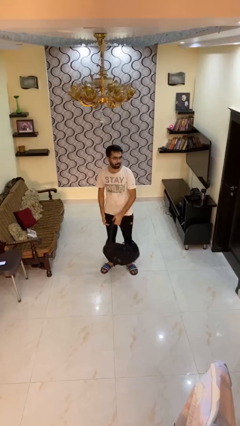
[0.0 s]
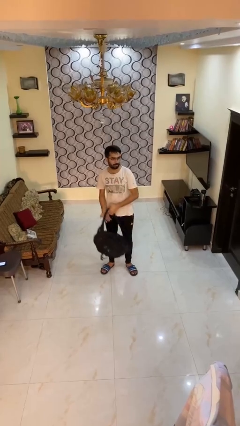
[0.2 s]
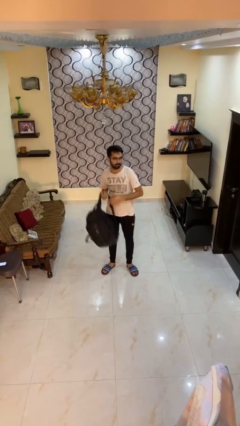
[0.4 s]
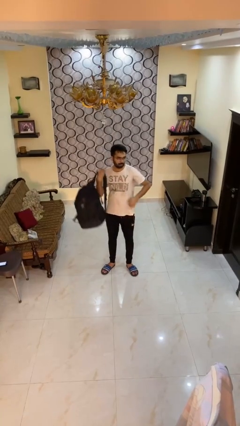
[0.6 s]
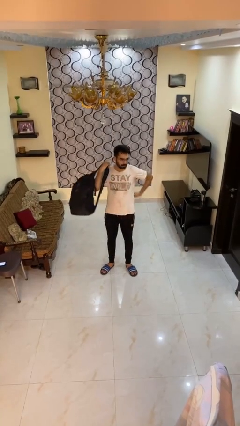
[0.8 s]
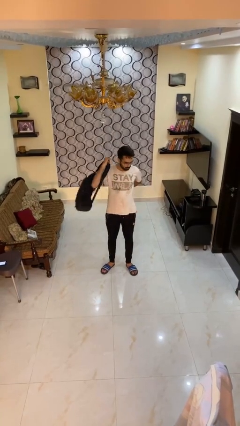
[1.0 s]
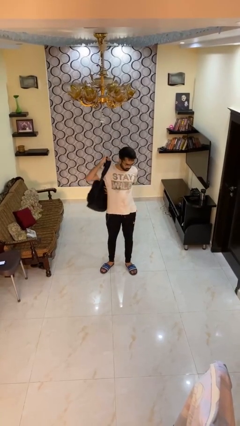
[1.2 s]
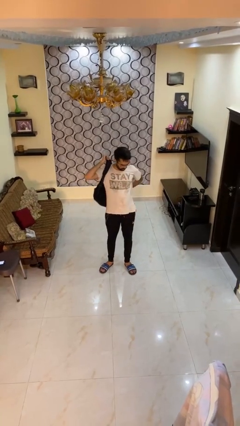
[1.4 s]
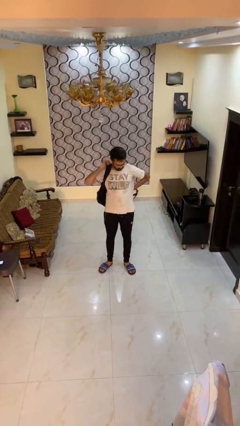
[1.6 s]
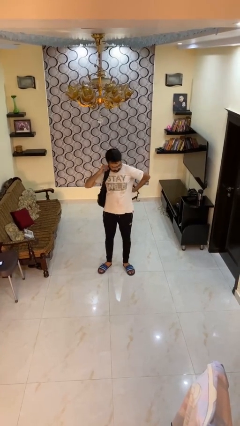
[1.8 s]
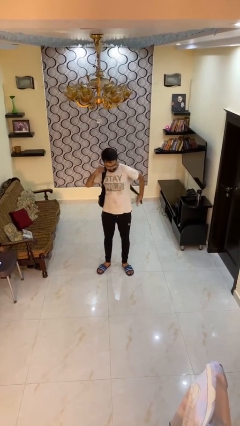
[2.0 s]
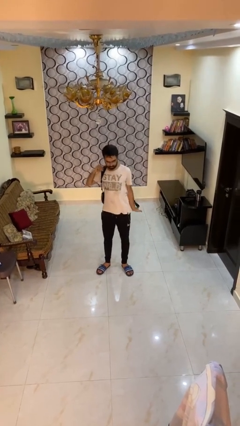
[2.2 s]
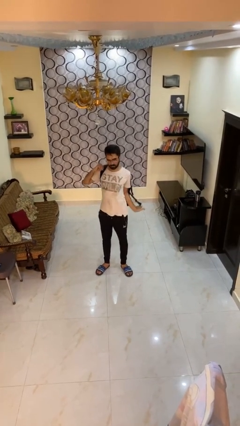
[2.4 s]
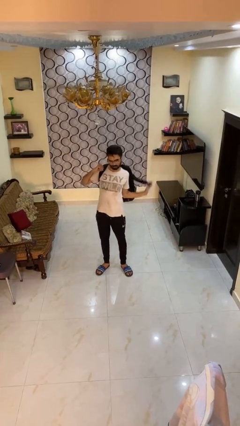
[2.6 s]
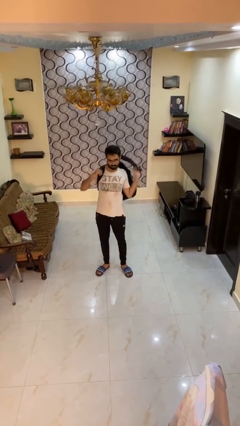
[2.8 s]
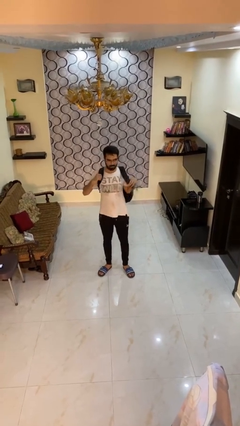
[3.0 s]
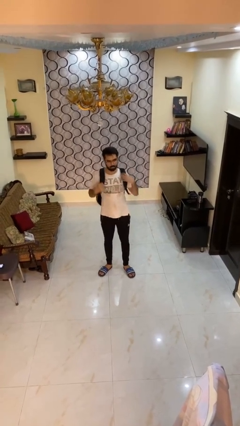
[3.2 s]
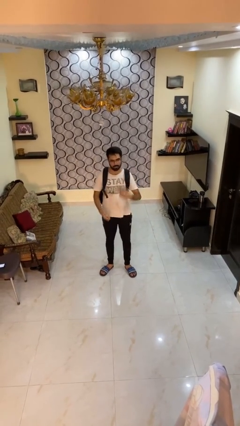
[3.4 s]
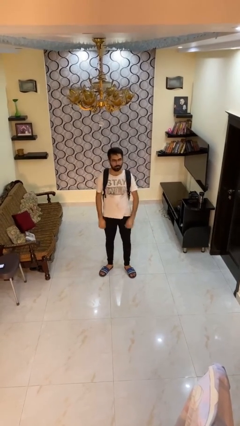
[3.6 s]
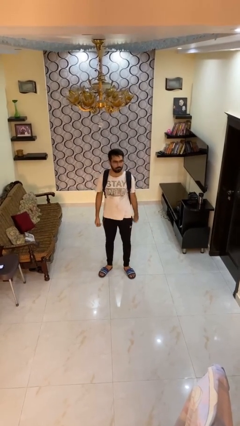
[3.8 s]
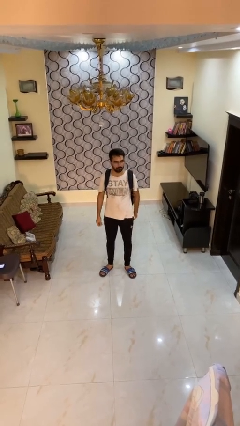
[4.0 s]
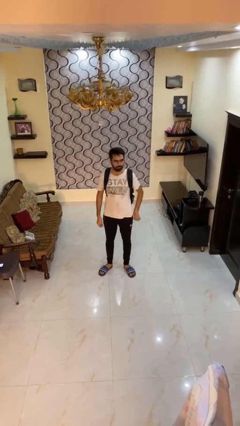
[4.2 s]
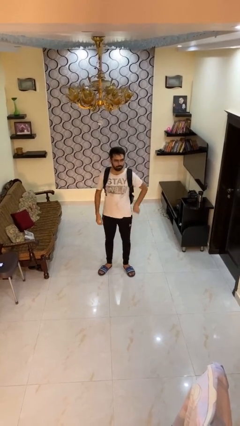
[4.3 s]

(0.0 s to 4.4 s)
person puts on backpack

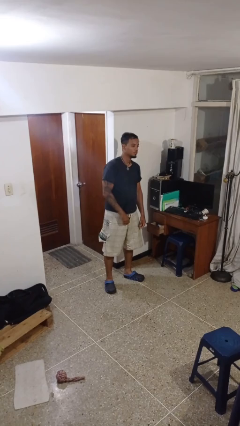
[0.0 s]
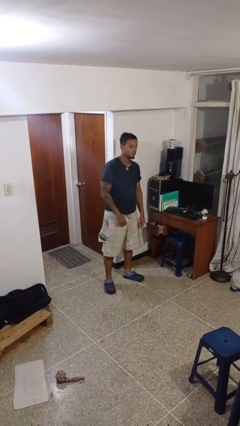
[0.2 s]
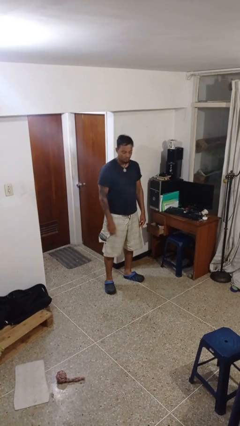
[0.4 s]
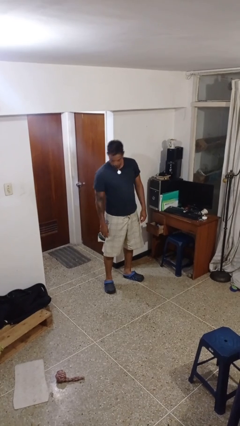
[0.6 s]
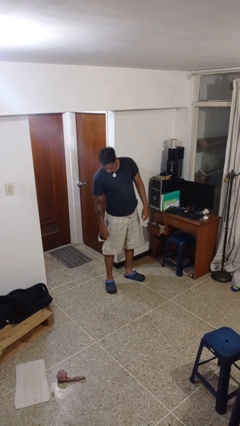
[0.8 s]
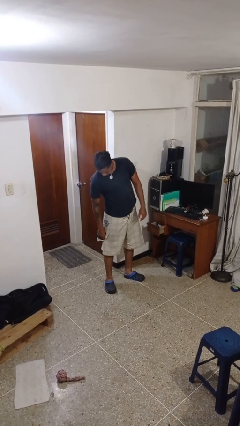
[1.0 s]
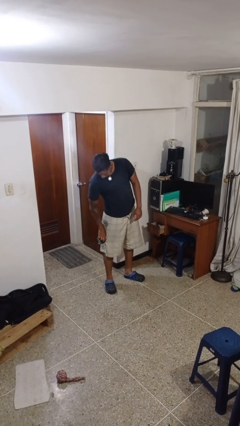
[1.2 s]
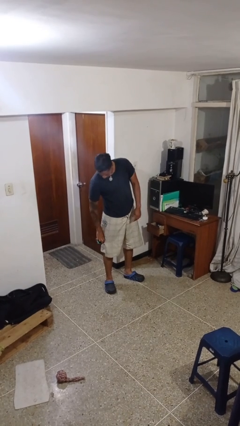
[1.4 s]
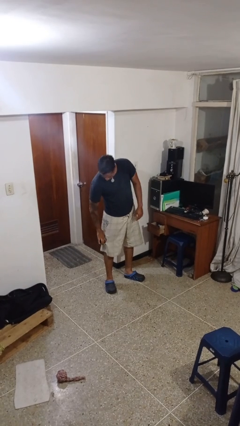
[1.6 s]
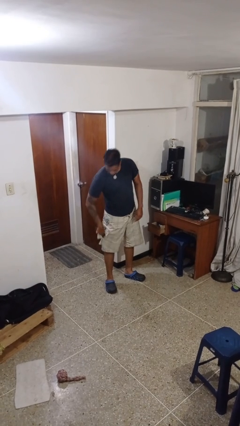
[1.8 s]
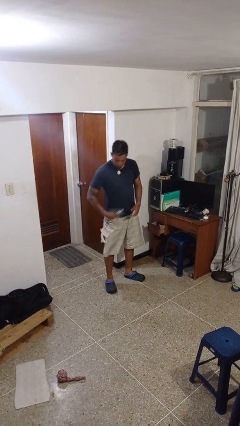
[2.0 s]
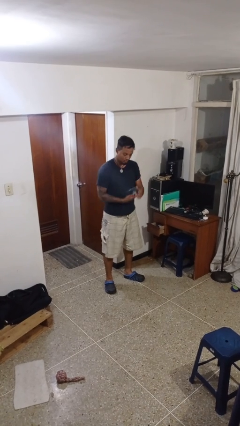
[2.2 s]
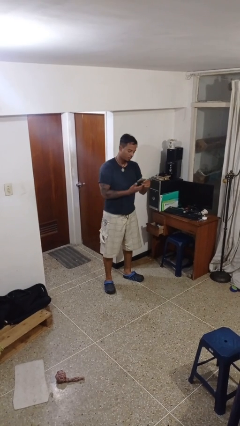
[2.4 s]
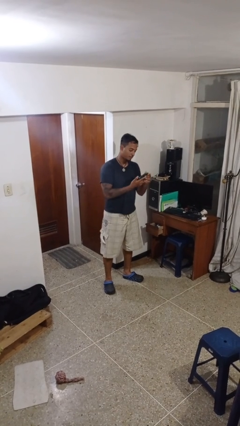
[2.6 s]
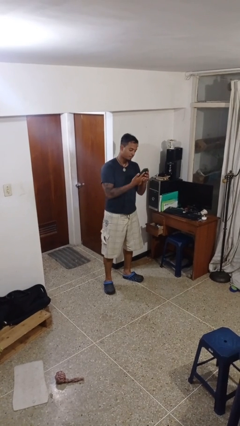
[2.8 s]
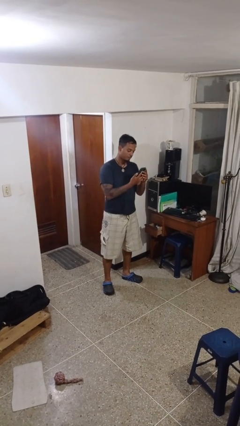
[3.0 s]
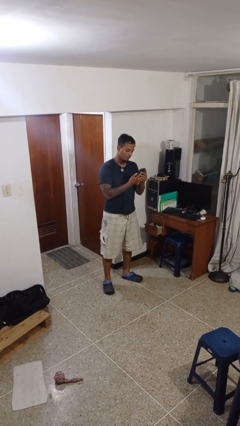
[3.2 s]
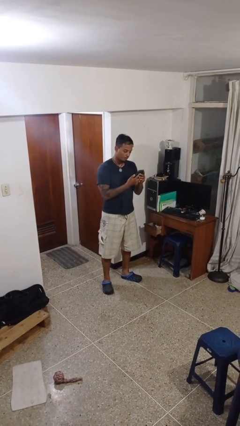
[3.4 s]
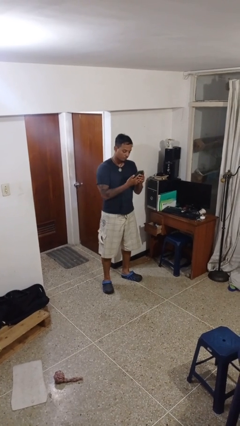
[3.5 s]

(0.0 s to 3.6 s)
person takes phone from pocket

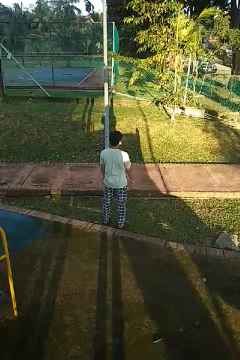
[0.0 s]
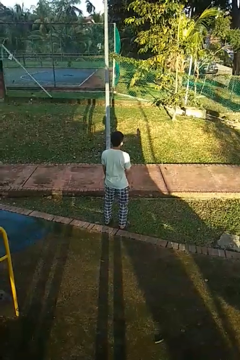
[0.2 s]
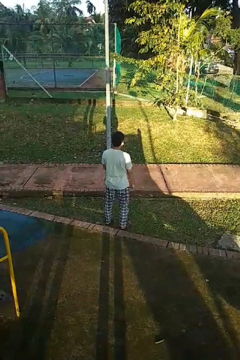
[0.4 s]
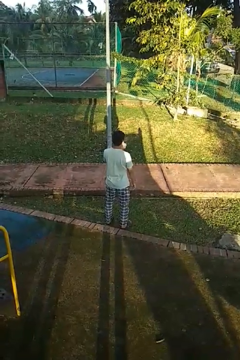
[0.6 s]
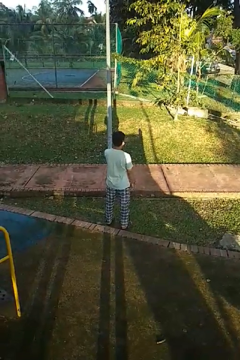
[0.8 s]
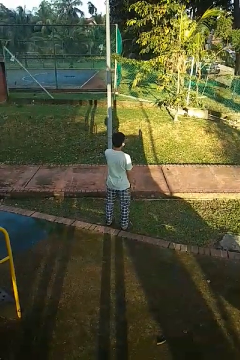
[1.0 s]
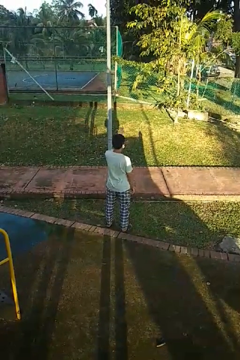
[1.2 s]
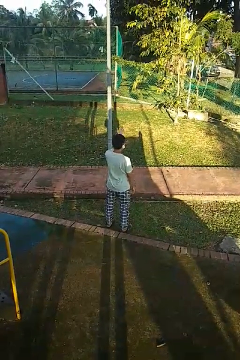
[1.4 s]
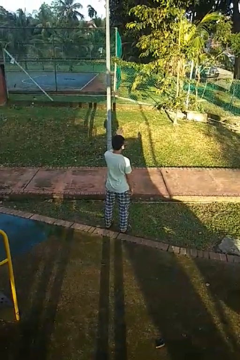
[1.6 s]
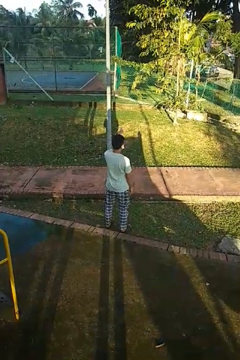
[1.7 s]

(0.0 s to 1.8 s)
person gestures blow kiss

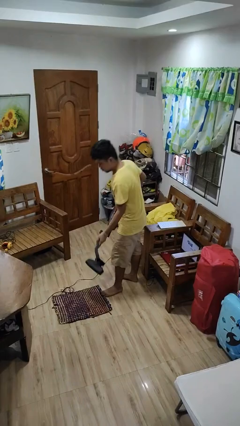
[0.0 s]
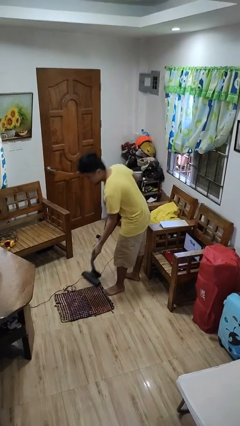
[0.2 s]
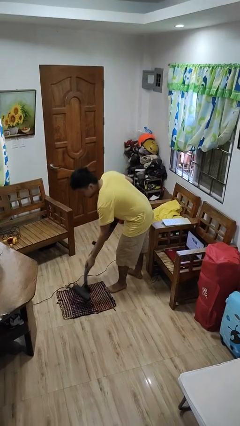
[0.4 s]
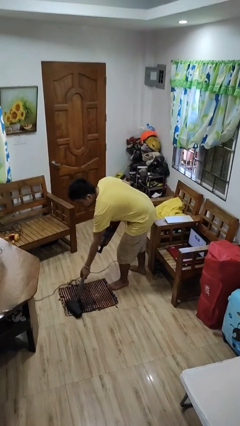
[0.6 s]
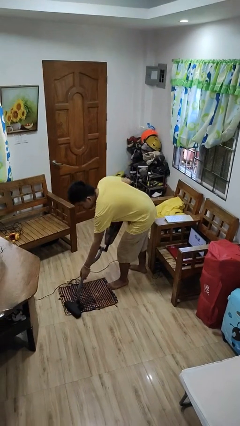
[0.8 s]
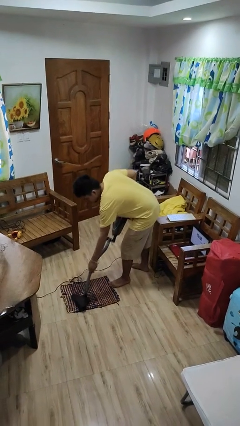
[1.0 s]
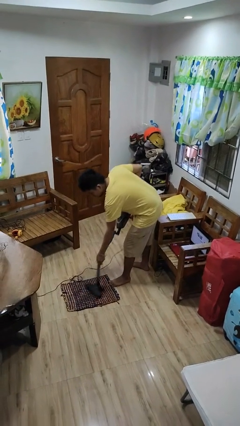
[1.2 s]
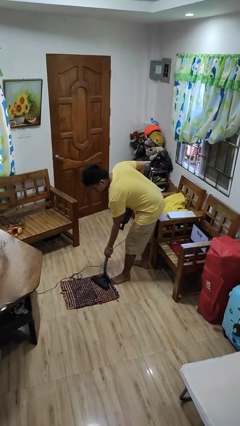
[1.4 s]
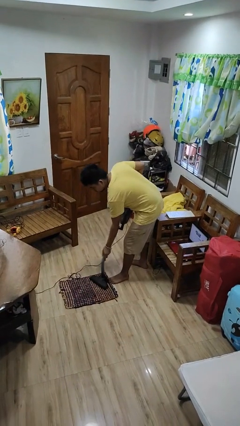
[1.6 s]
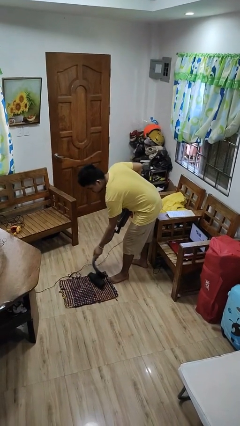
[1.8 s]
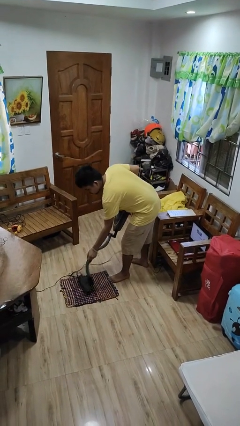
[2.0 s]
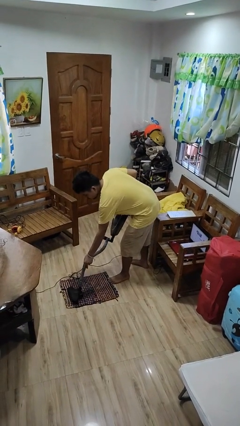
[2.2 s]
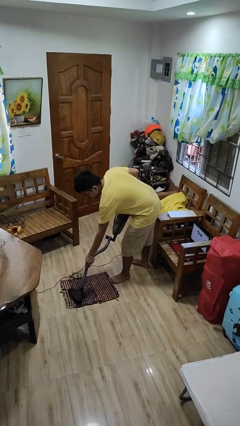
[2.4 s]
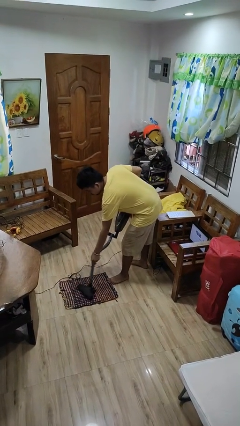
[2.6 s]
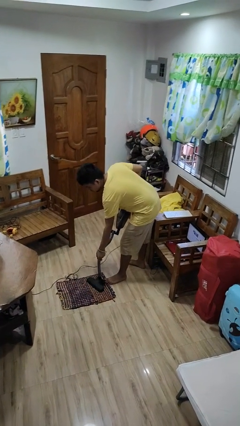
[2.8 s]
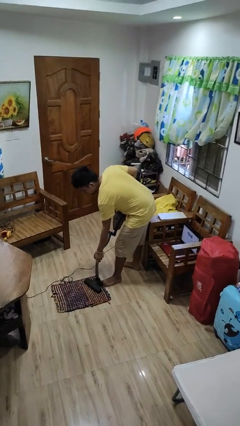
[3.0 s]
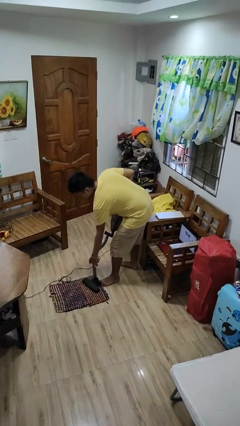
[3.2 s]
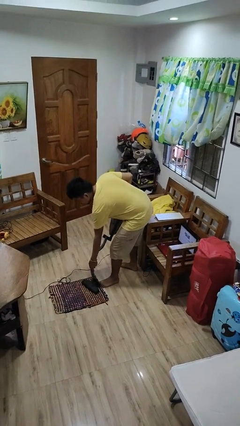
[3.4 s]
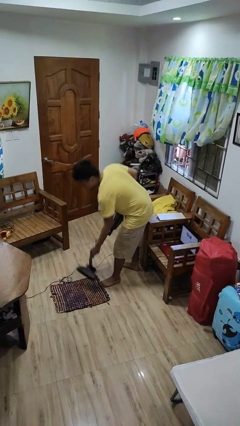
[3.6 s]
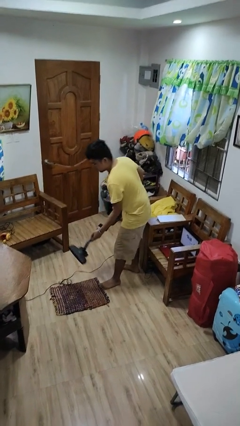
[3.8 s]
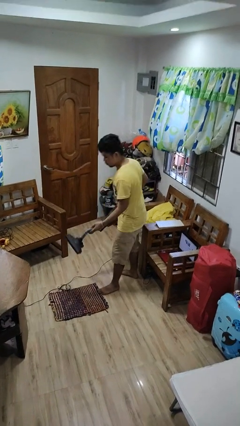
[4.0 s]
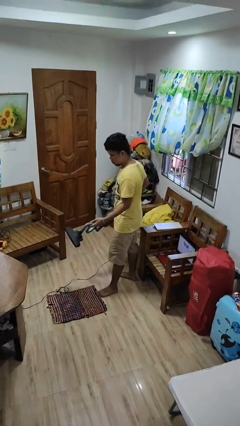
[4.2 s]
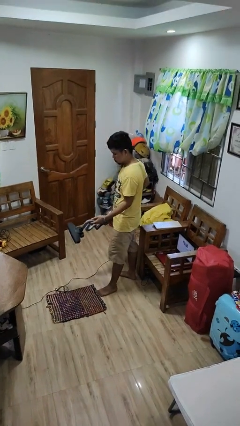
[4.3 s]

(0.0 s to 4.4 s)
person vacuums carpet

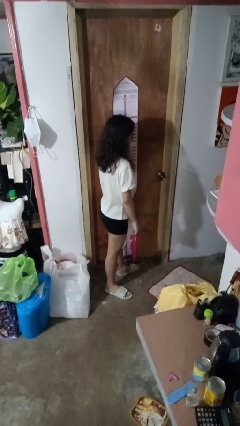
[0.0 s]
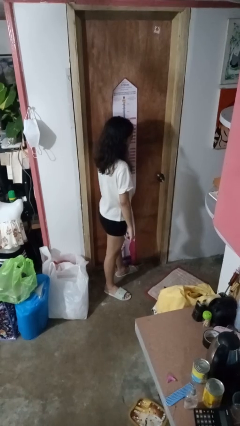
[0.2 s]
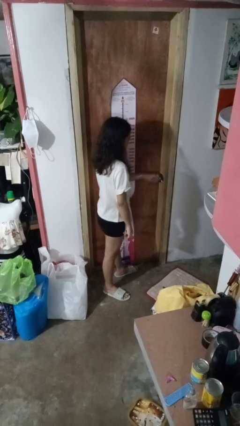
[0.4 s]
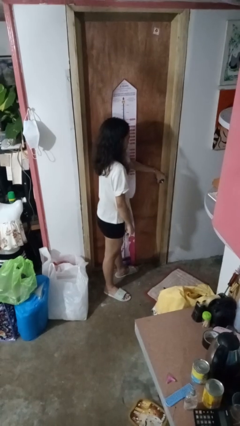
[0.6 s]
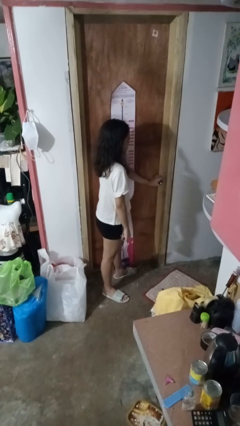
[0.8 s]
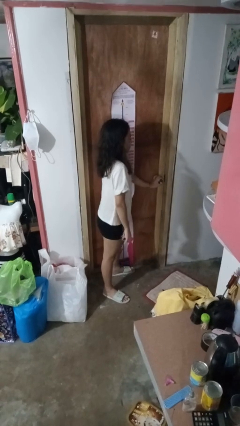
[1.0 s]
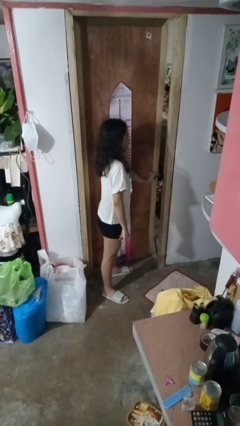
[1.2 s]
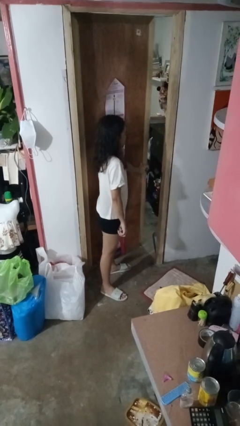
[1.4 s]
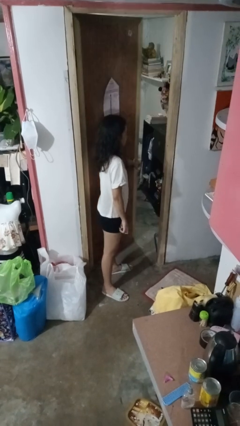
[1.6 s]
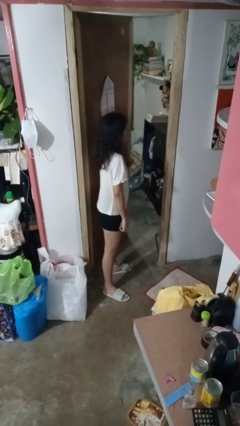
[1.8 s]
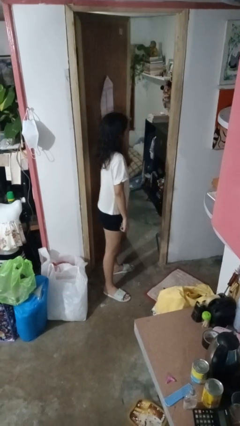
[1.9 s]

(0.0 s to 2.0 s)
person opens facility door

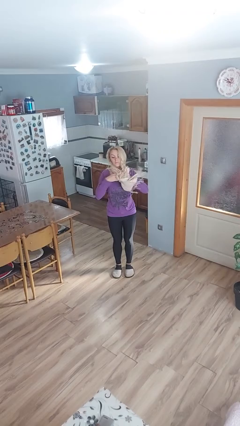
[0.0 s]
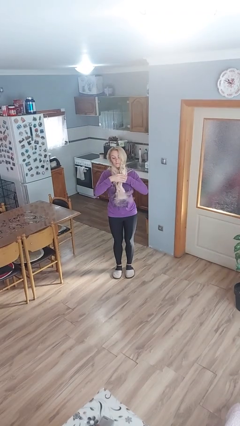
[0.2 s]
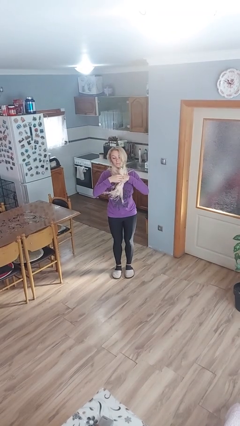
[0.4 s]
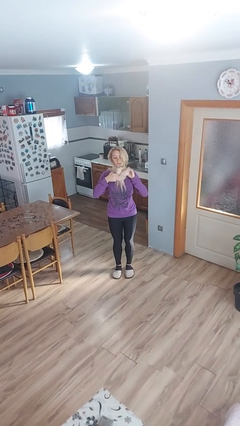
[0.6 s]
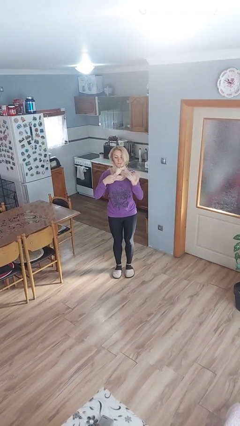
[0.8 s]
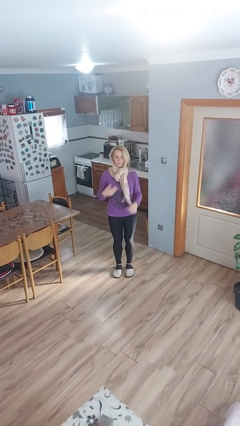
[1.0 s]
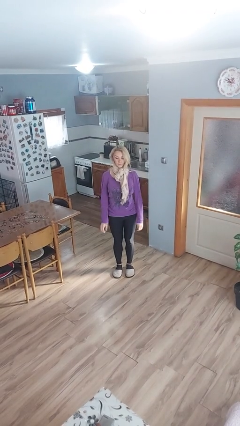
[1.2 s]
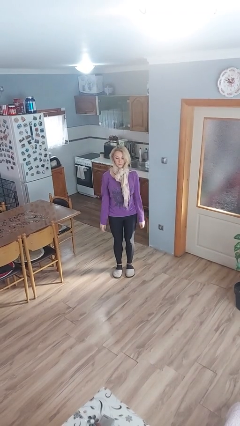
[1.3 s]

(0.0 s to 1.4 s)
person puts on scarf
